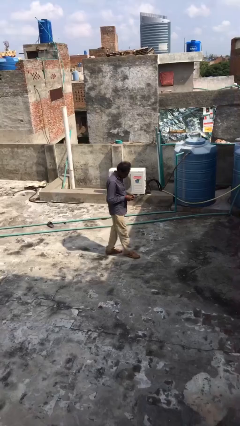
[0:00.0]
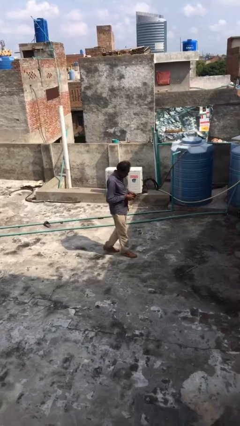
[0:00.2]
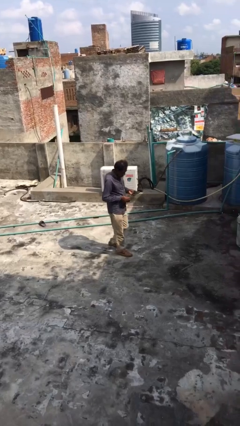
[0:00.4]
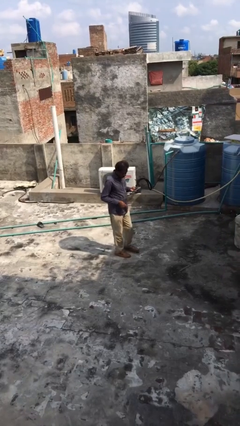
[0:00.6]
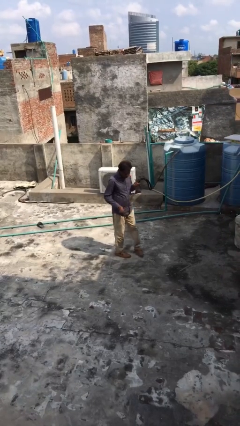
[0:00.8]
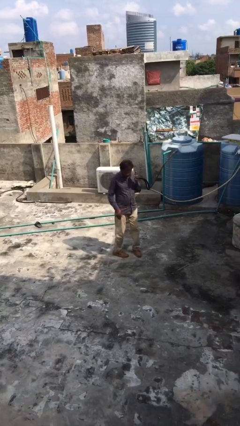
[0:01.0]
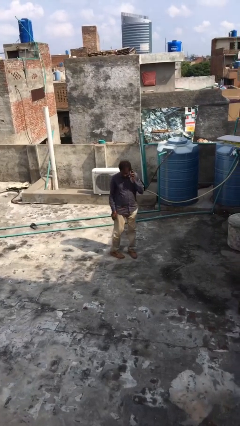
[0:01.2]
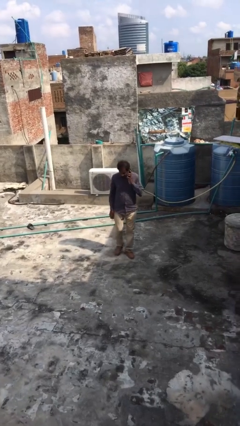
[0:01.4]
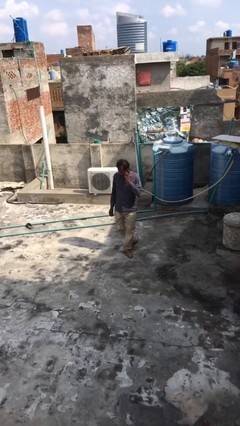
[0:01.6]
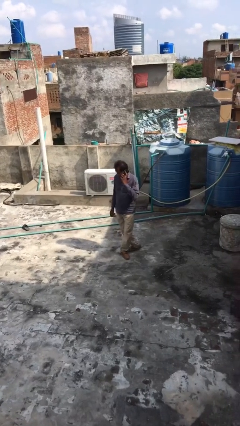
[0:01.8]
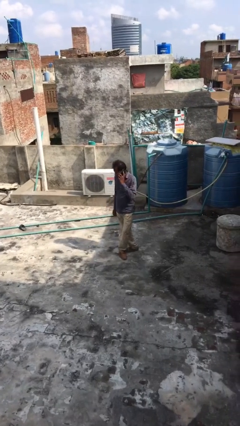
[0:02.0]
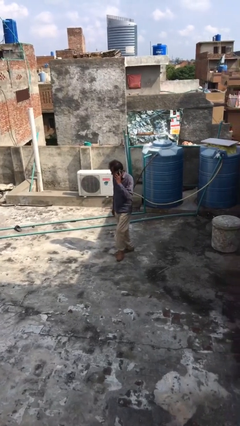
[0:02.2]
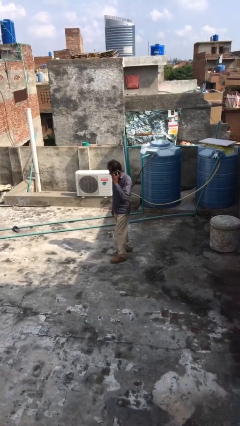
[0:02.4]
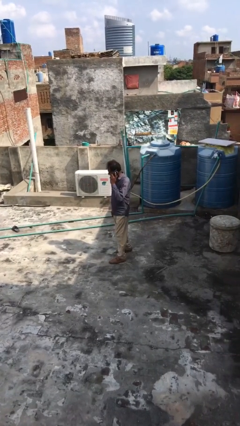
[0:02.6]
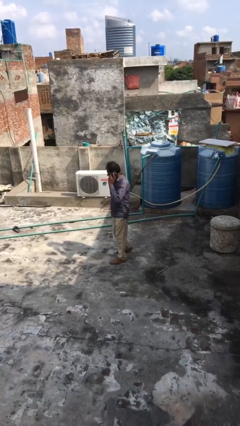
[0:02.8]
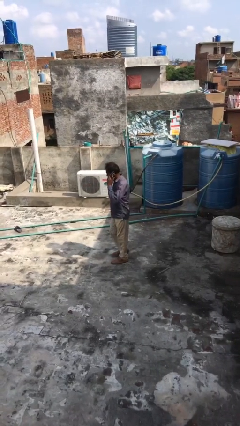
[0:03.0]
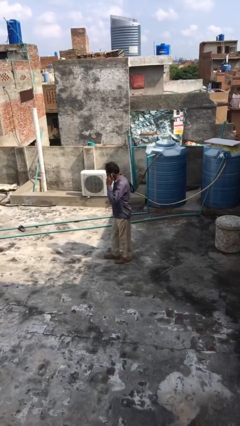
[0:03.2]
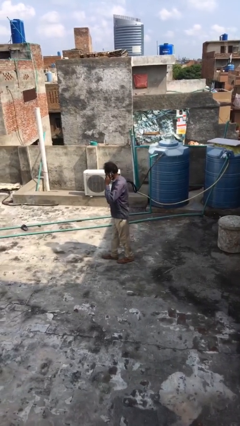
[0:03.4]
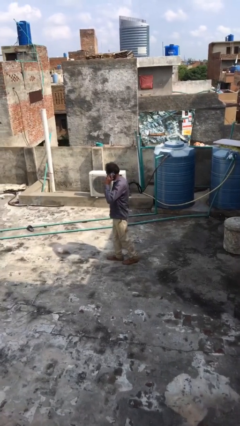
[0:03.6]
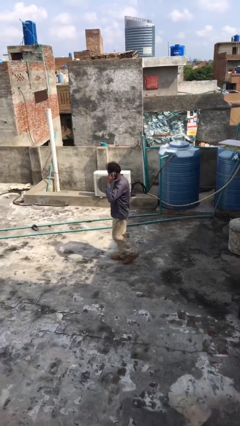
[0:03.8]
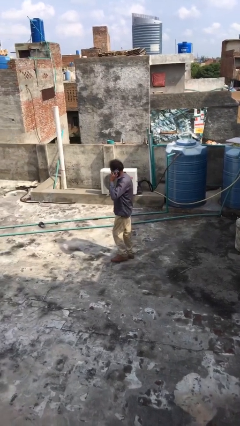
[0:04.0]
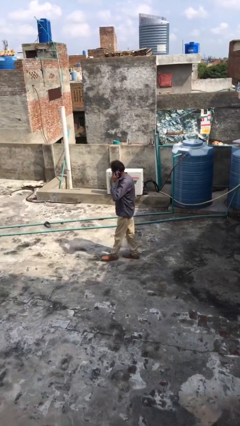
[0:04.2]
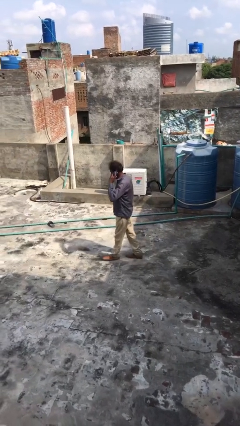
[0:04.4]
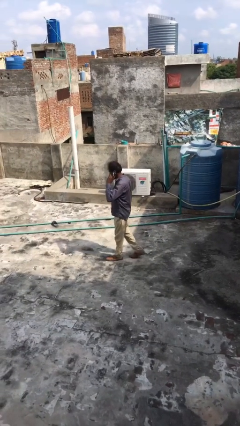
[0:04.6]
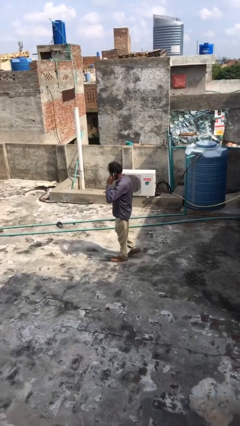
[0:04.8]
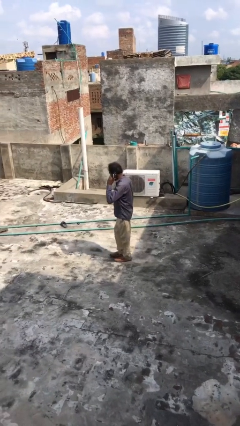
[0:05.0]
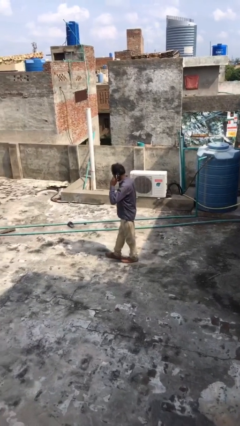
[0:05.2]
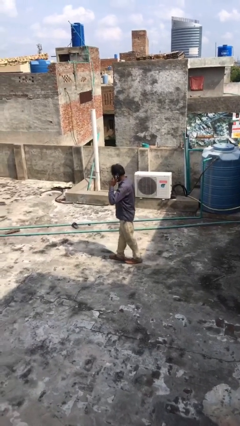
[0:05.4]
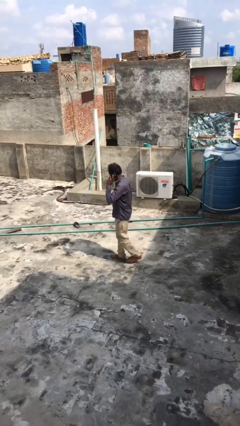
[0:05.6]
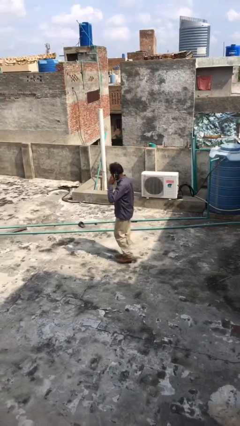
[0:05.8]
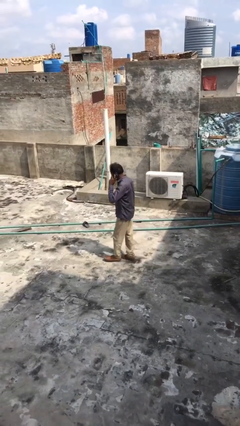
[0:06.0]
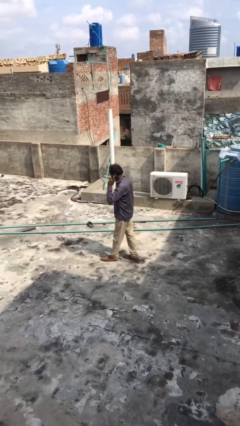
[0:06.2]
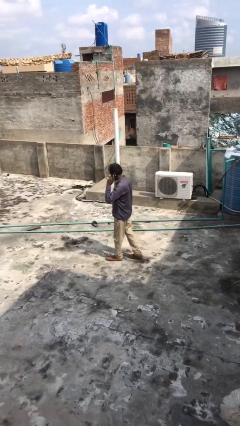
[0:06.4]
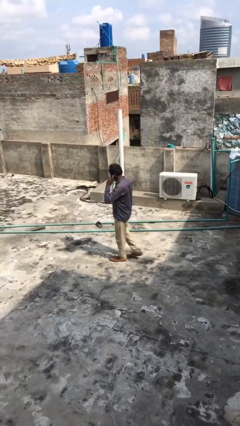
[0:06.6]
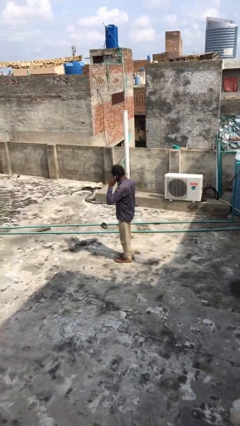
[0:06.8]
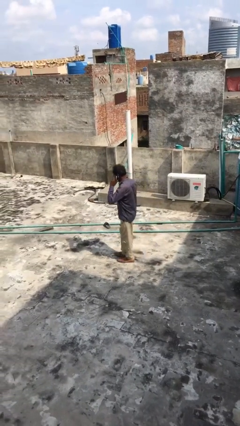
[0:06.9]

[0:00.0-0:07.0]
person talks on phone

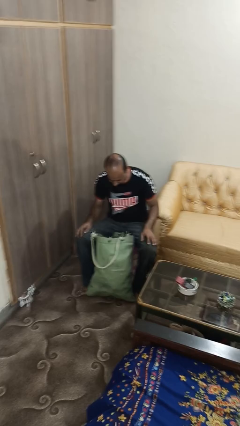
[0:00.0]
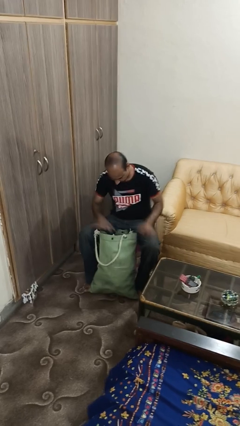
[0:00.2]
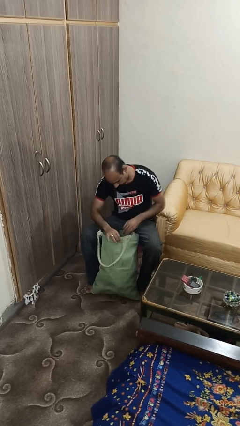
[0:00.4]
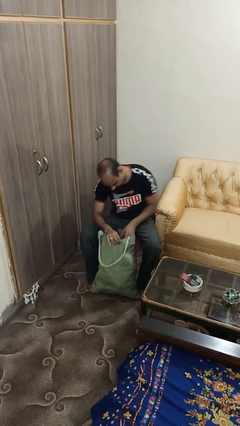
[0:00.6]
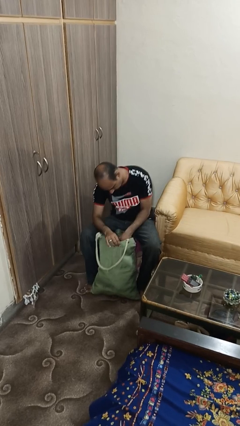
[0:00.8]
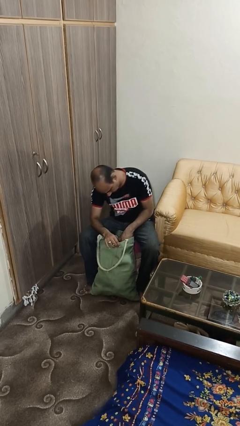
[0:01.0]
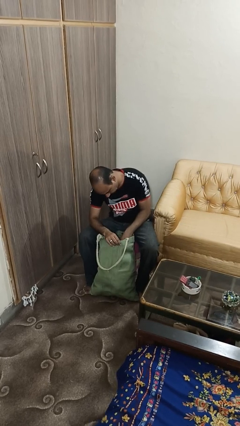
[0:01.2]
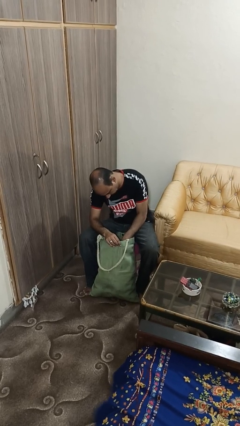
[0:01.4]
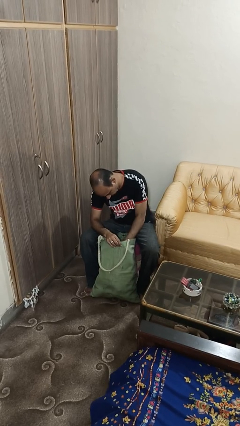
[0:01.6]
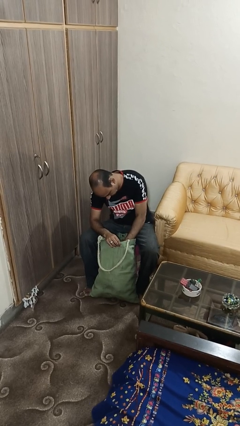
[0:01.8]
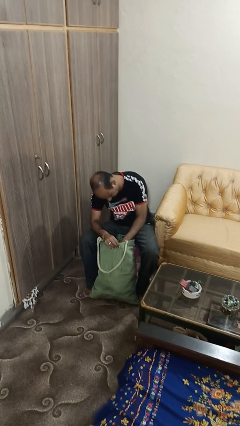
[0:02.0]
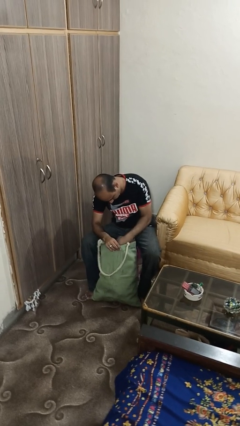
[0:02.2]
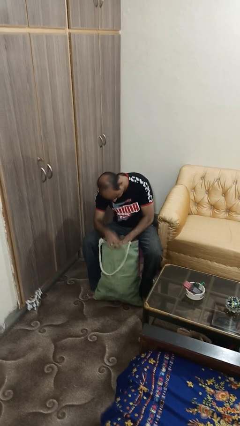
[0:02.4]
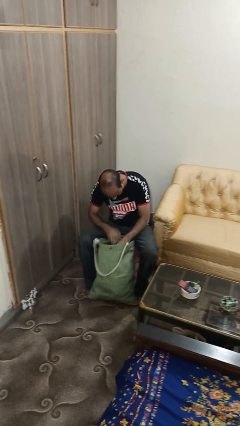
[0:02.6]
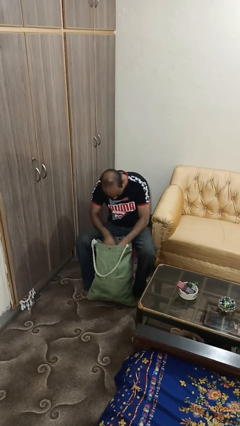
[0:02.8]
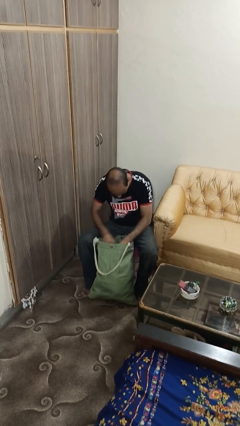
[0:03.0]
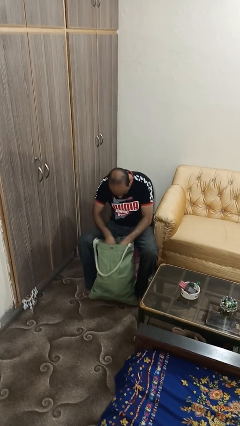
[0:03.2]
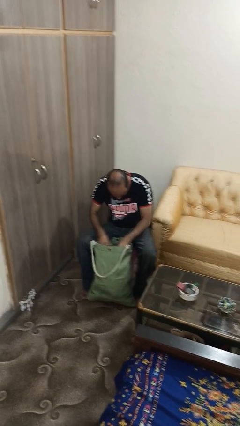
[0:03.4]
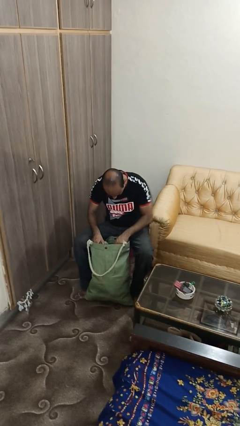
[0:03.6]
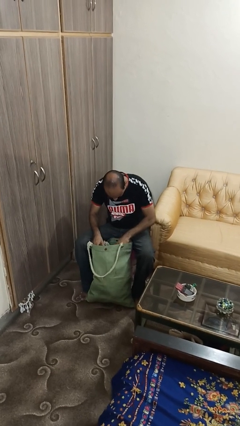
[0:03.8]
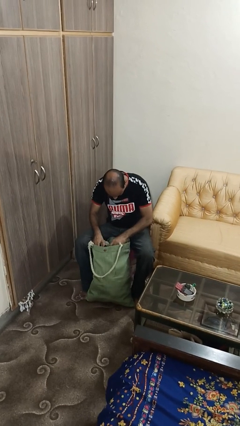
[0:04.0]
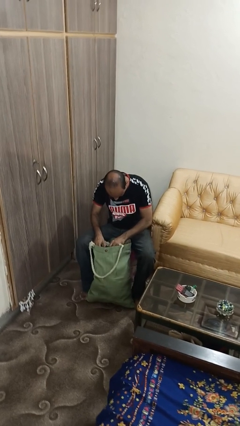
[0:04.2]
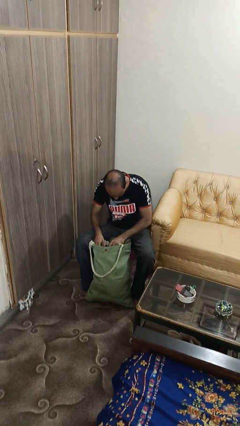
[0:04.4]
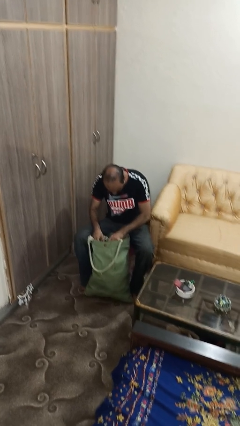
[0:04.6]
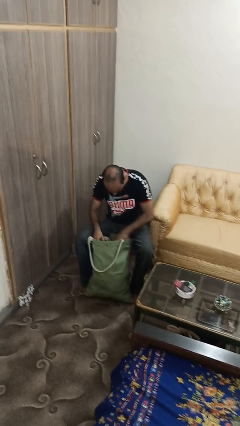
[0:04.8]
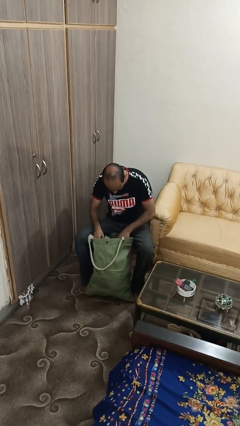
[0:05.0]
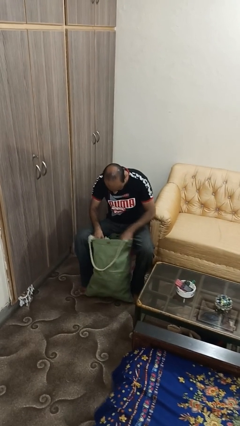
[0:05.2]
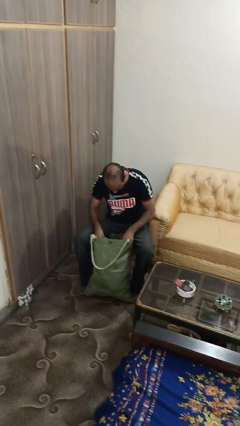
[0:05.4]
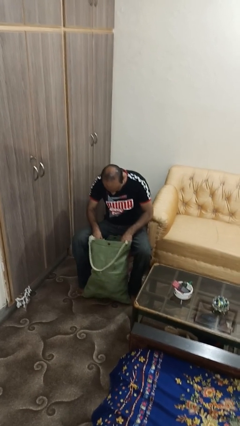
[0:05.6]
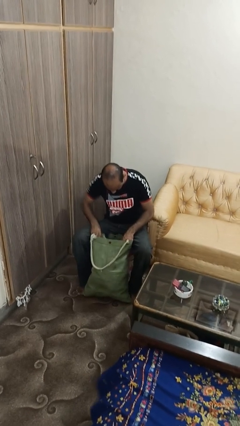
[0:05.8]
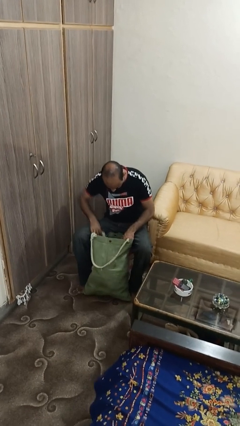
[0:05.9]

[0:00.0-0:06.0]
person searches in bag

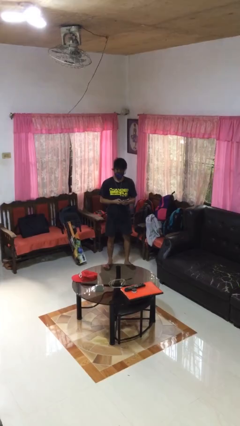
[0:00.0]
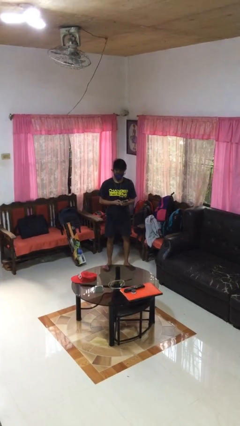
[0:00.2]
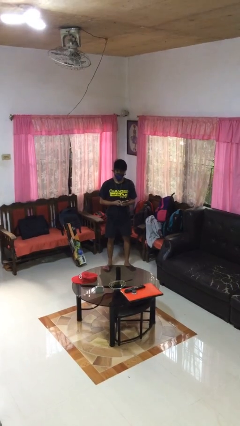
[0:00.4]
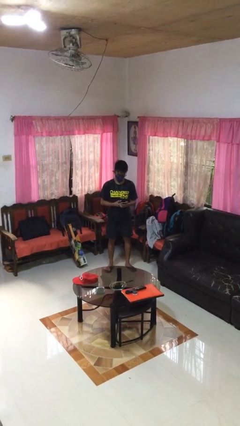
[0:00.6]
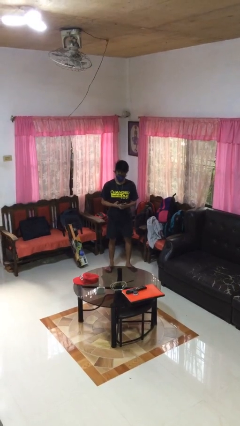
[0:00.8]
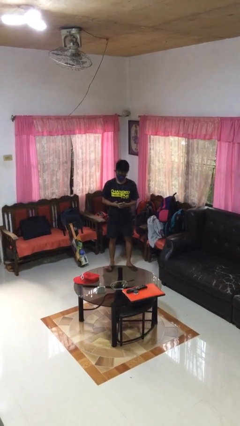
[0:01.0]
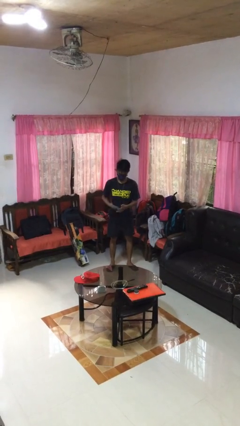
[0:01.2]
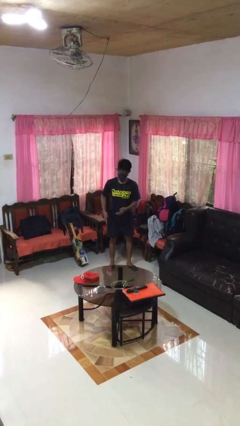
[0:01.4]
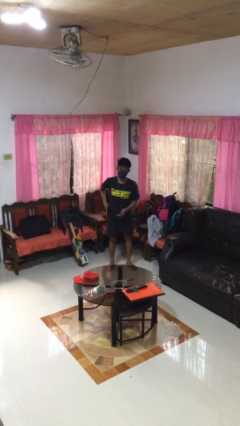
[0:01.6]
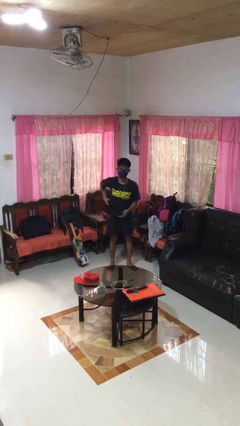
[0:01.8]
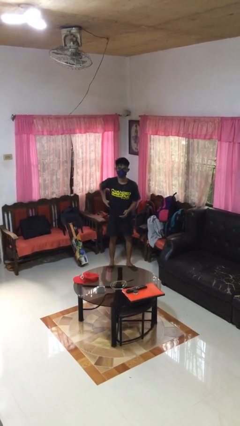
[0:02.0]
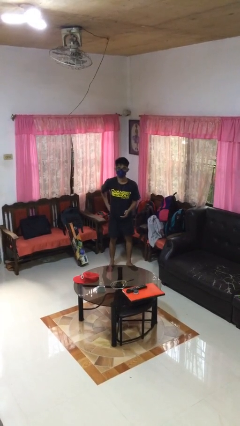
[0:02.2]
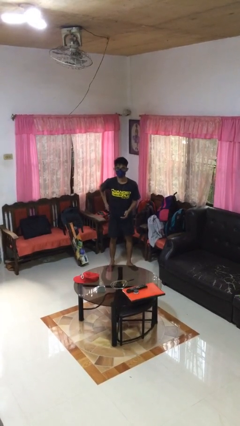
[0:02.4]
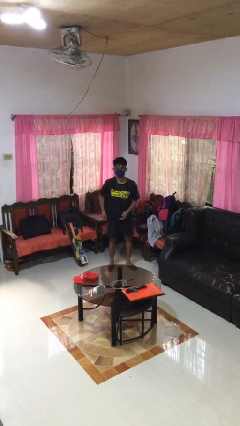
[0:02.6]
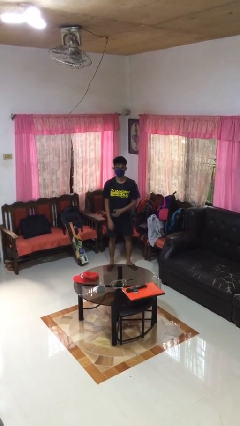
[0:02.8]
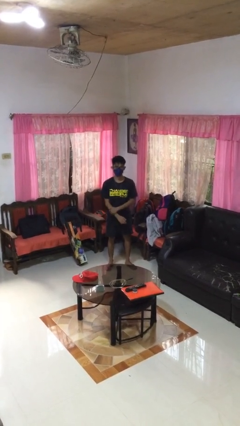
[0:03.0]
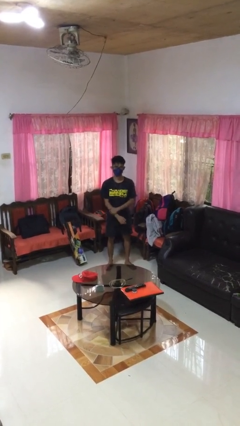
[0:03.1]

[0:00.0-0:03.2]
person puts phone into pocket

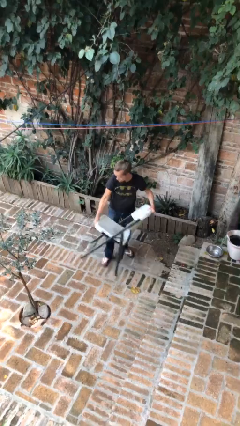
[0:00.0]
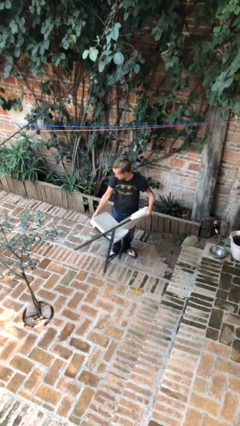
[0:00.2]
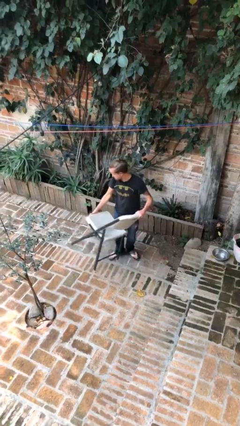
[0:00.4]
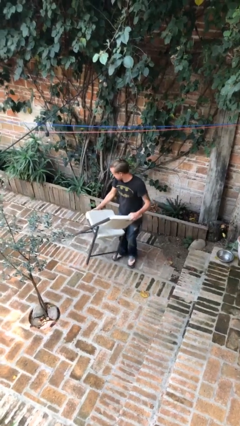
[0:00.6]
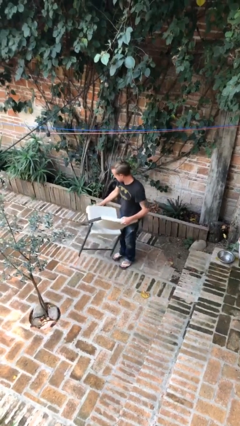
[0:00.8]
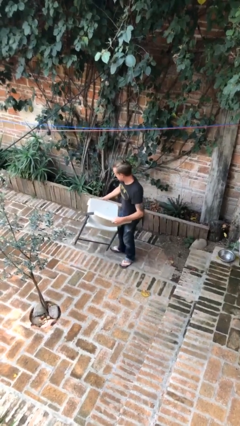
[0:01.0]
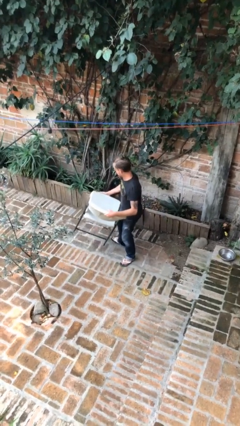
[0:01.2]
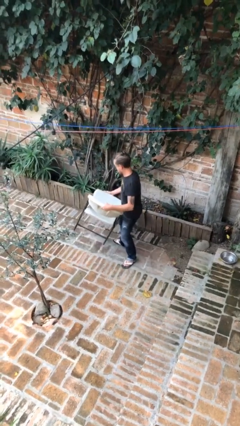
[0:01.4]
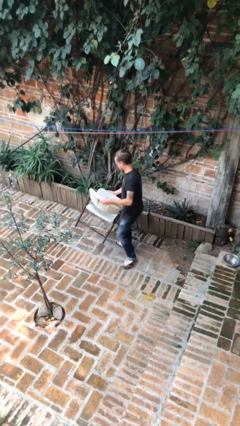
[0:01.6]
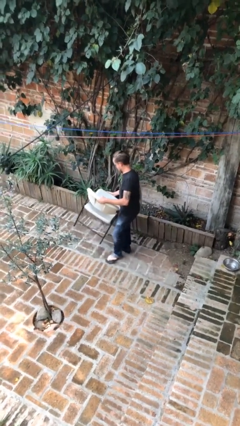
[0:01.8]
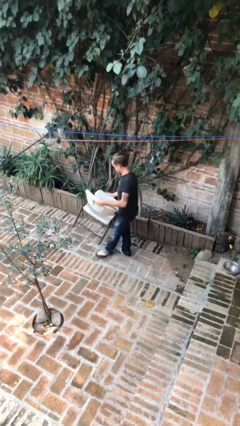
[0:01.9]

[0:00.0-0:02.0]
person carries heavy object
